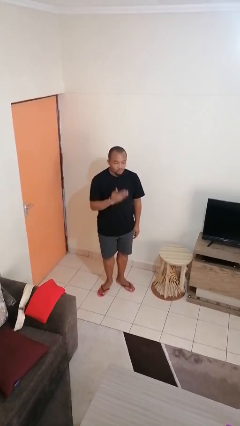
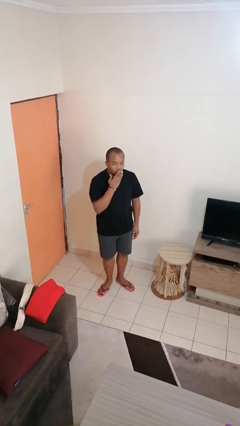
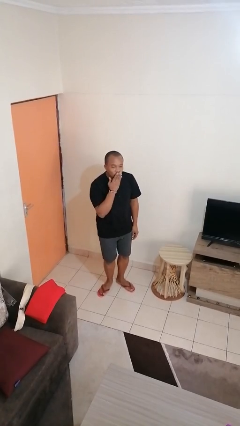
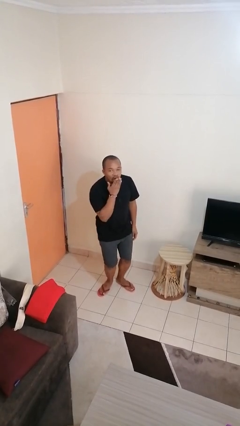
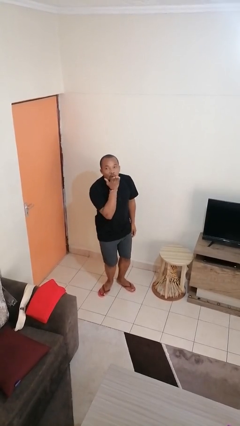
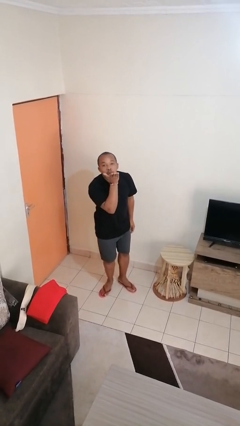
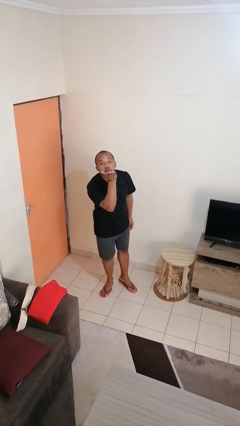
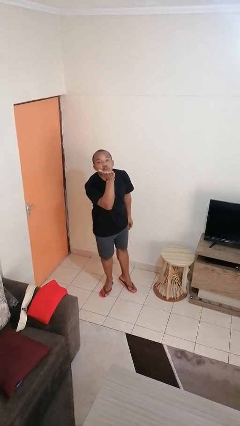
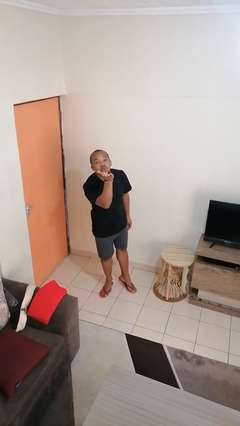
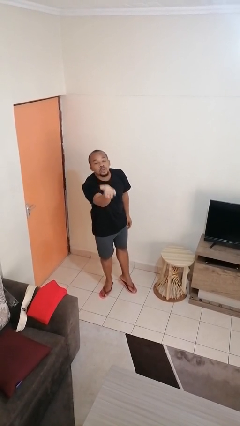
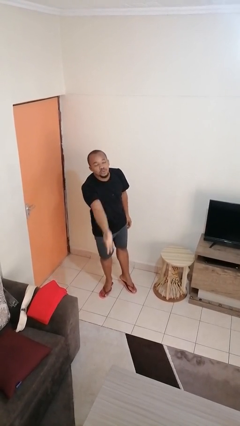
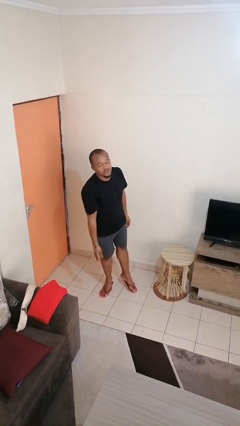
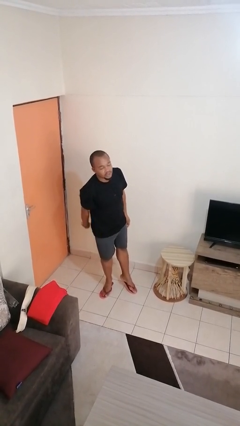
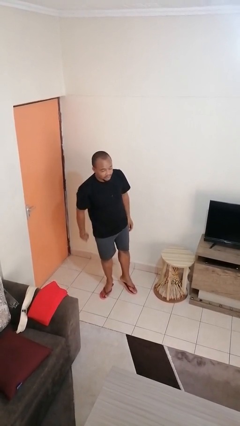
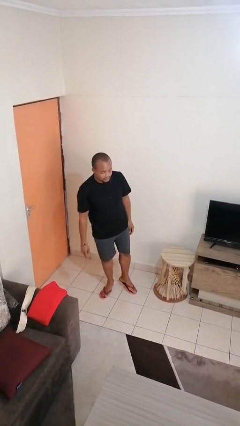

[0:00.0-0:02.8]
person gestures blow kiss

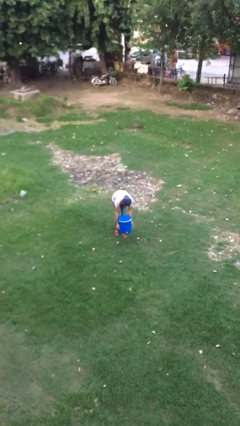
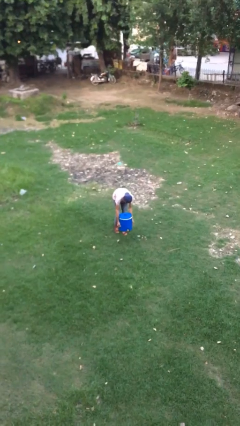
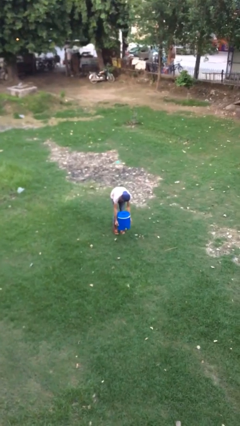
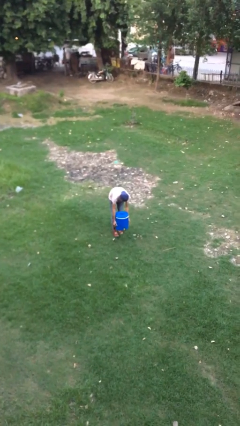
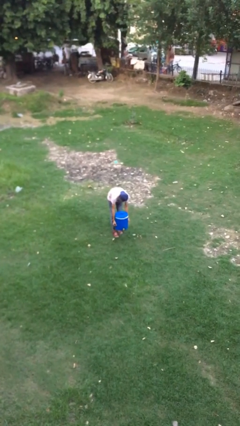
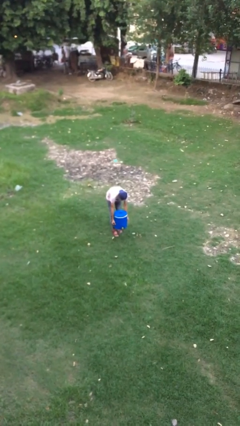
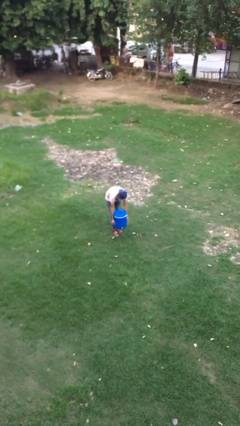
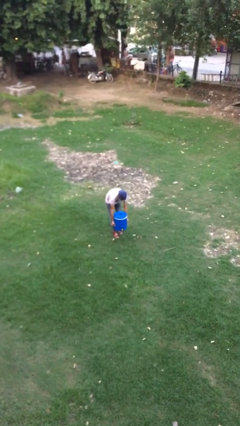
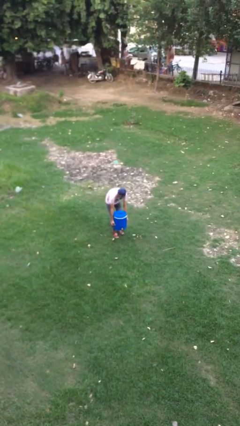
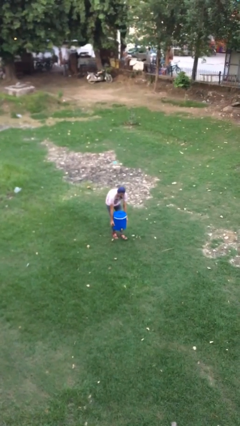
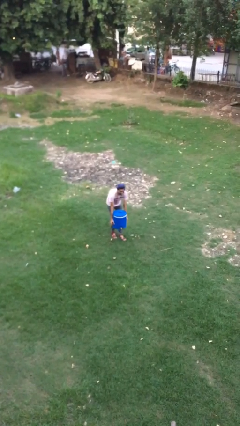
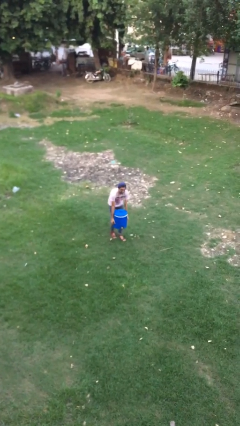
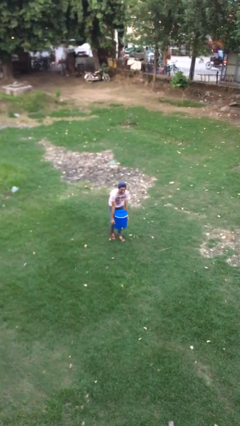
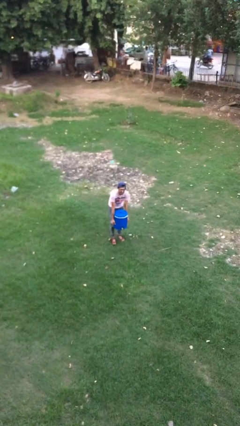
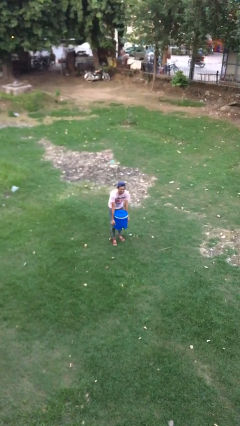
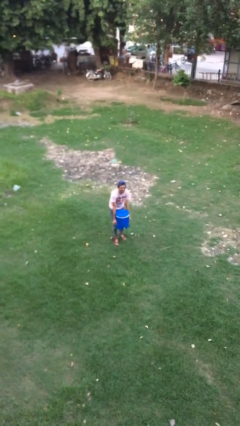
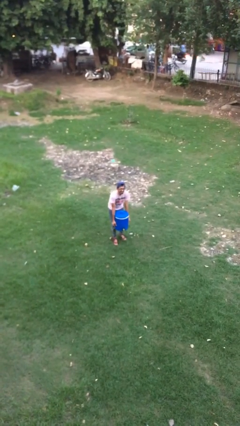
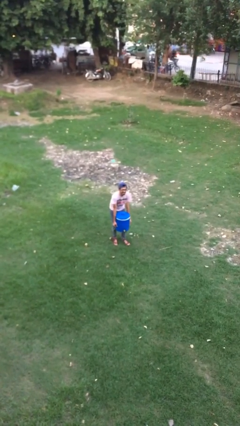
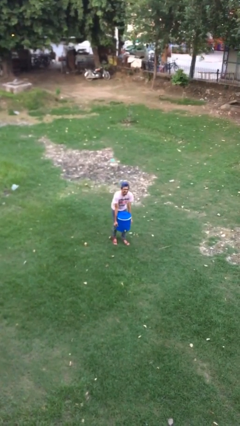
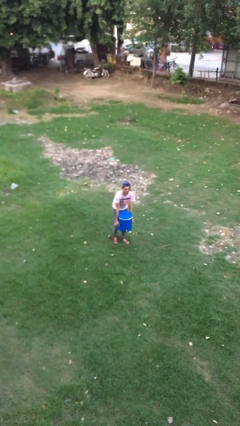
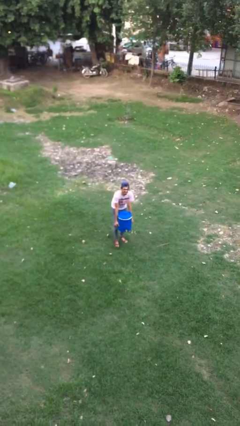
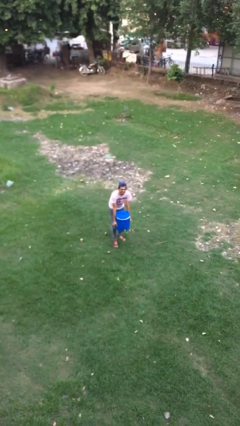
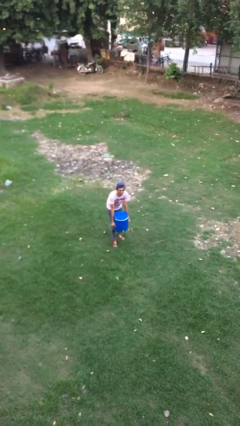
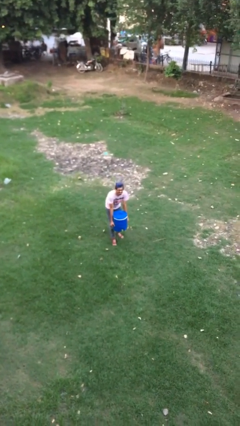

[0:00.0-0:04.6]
person carries heavy object

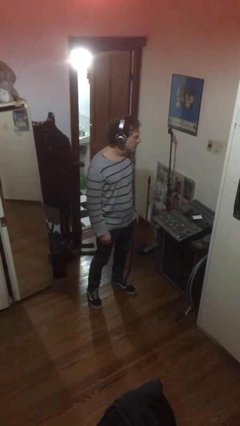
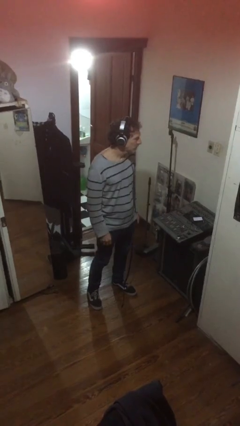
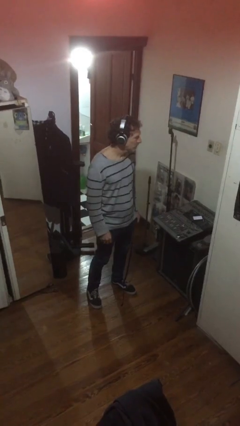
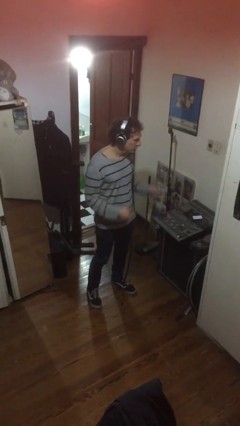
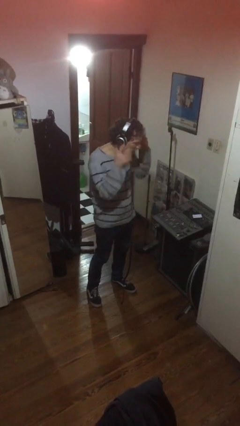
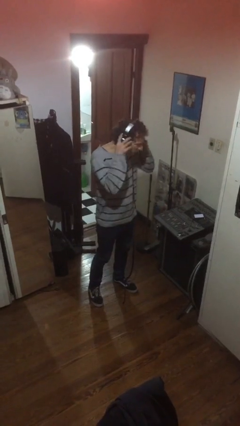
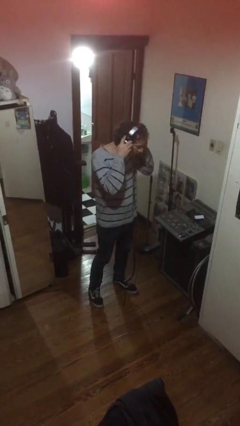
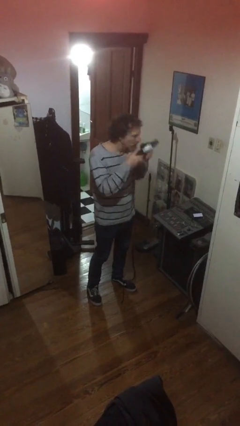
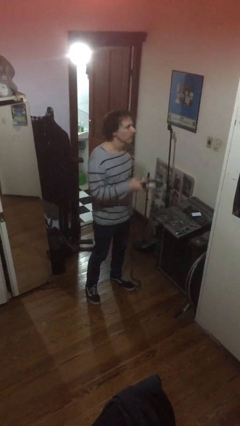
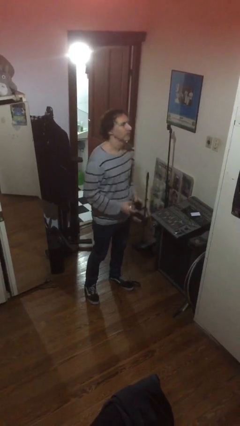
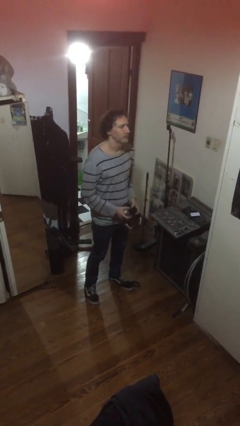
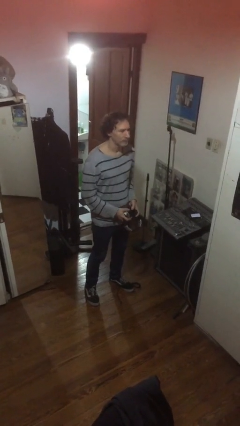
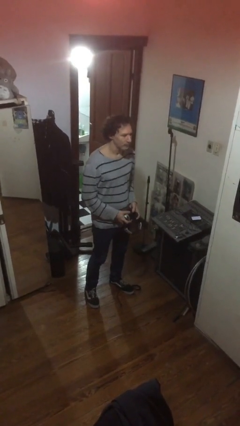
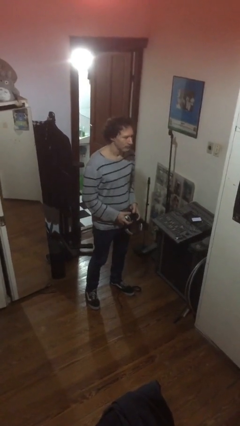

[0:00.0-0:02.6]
person takes off headphones

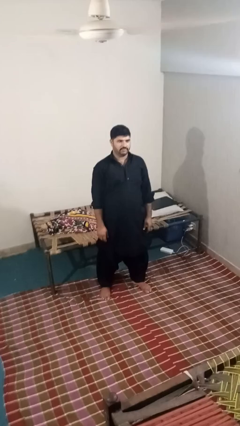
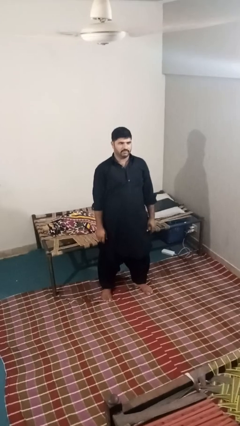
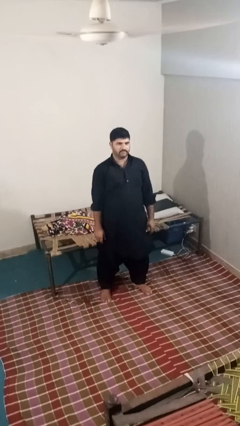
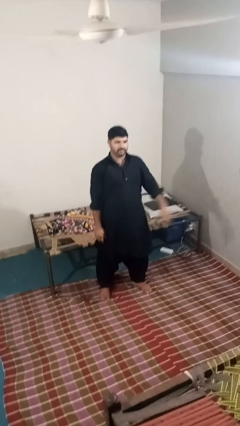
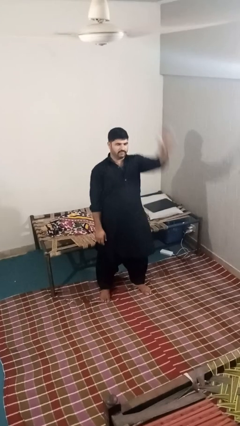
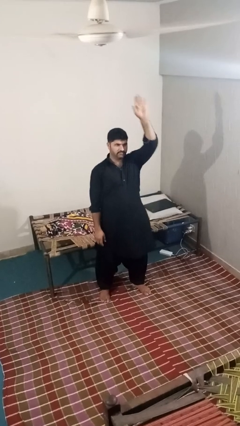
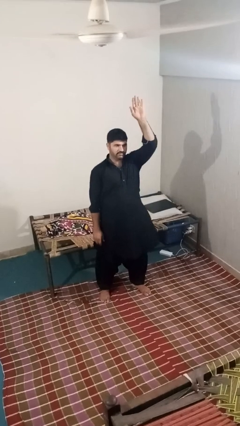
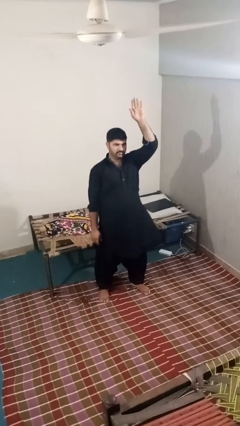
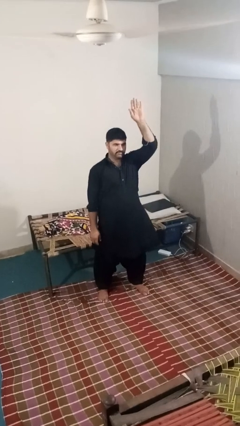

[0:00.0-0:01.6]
person gestures raise hand

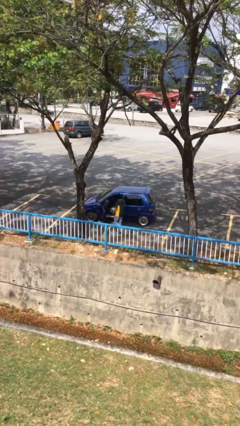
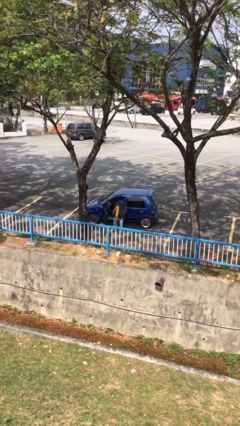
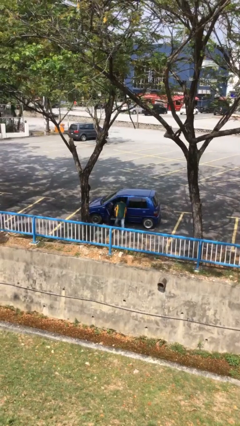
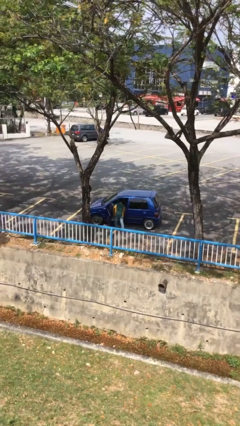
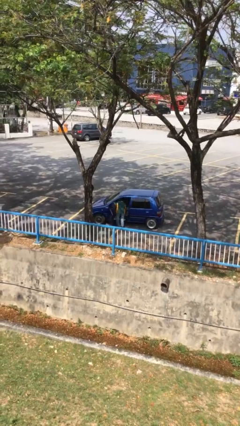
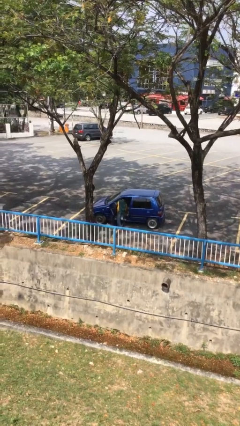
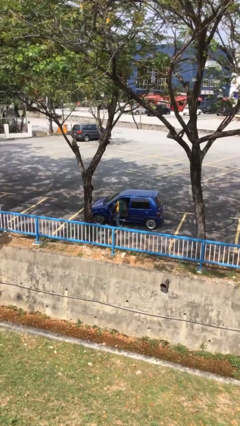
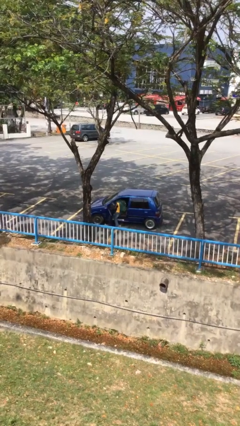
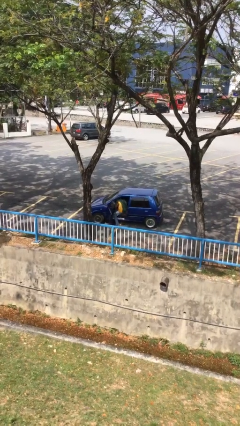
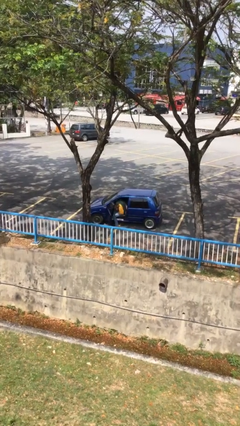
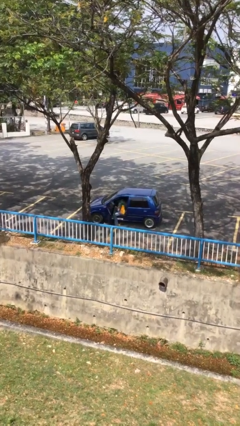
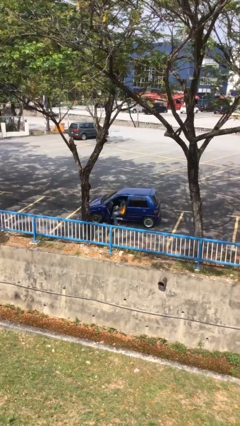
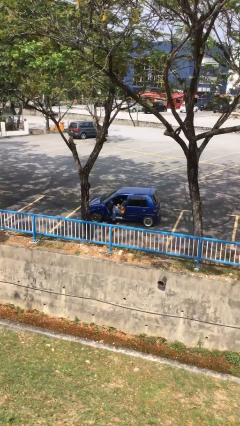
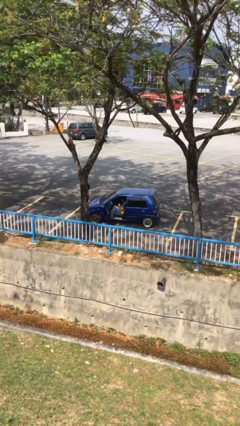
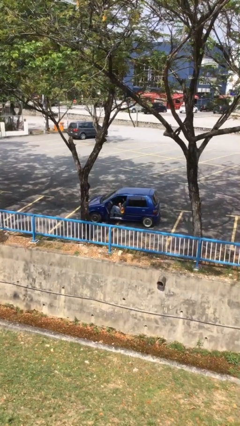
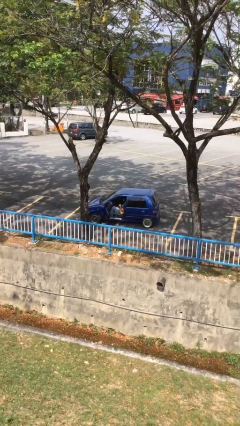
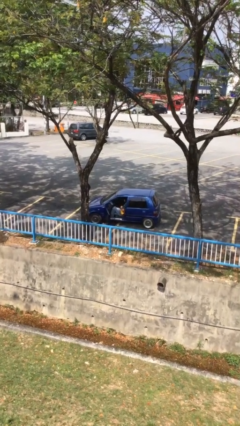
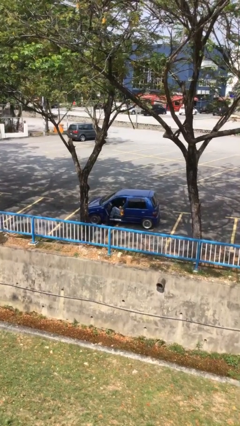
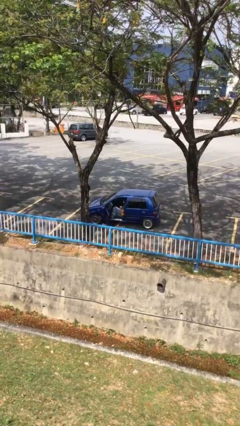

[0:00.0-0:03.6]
person enters car

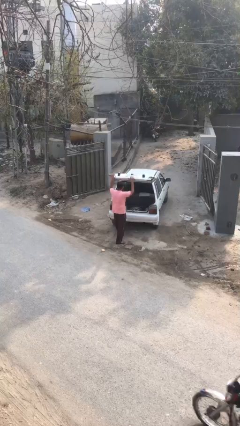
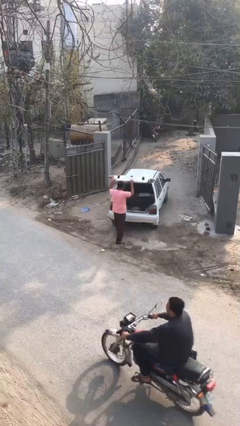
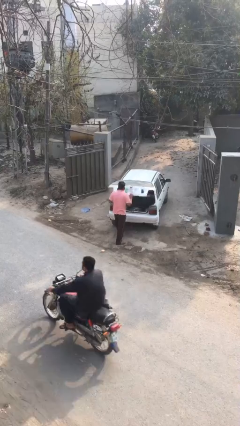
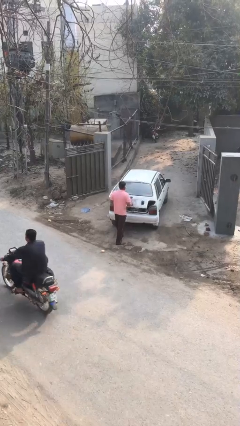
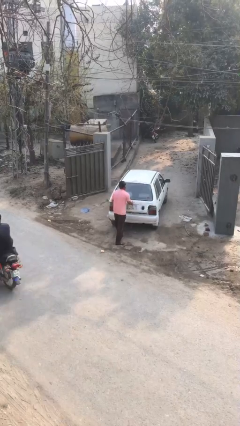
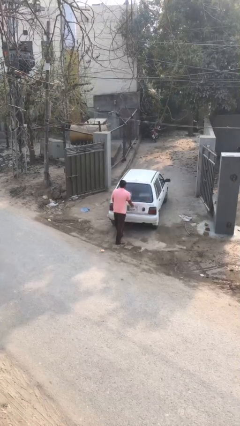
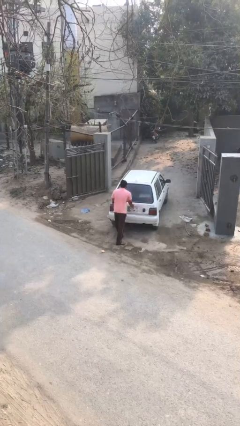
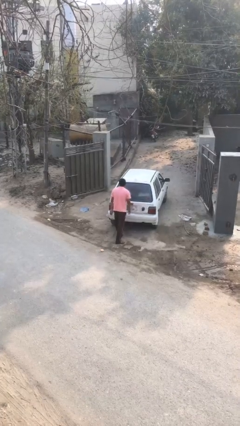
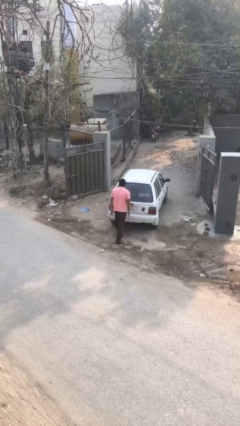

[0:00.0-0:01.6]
person closes car trunk

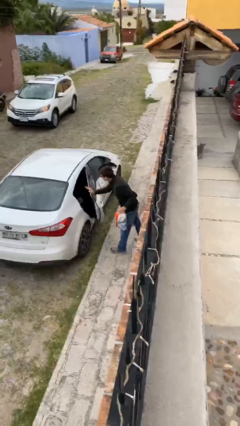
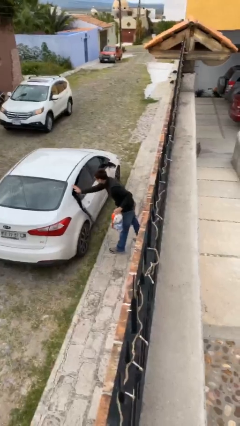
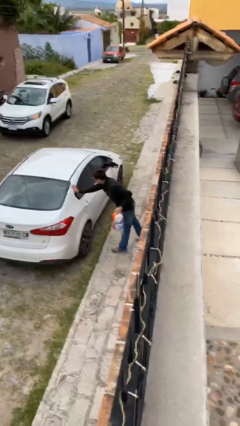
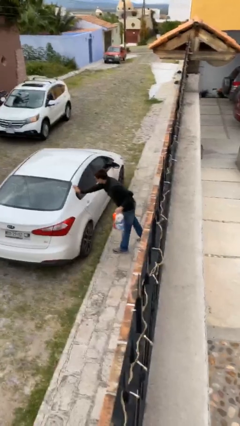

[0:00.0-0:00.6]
person closes car door
